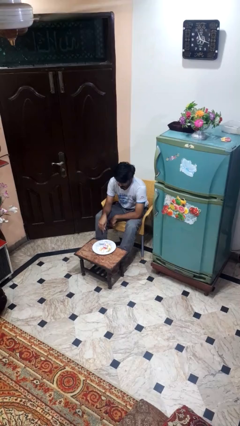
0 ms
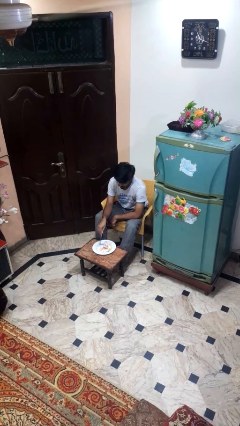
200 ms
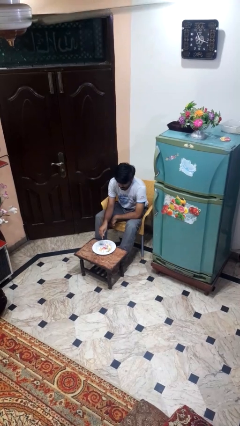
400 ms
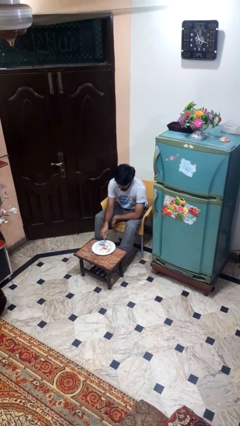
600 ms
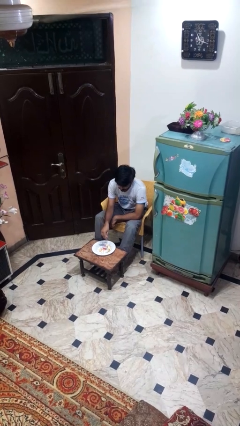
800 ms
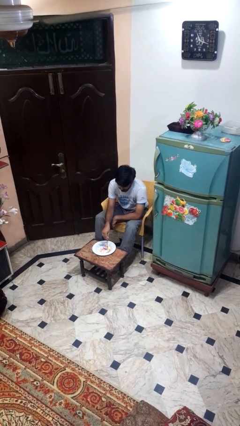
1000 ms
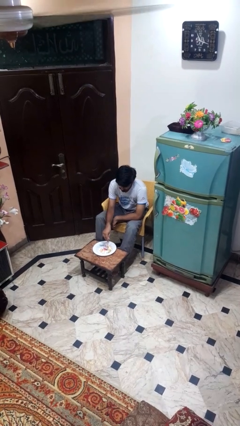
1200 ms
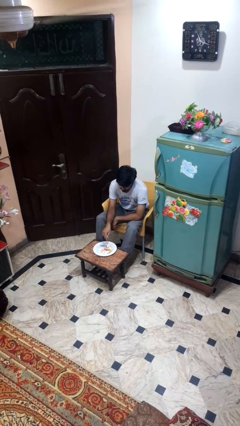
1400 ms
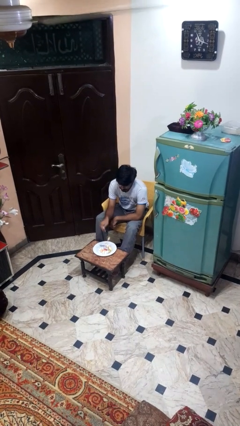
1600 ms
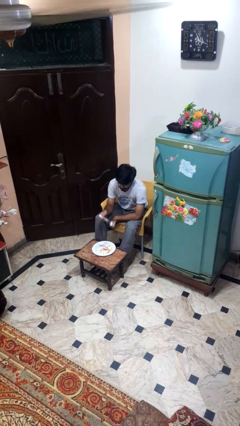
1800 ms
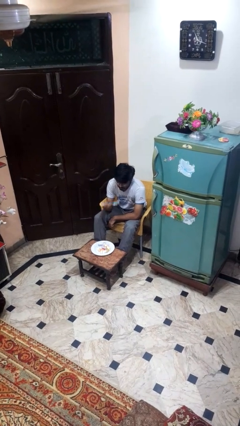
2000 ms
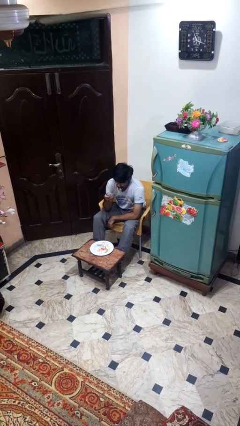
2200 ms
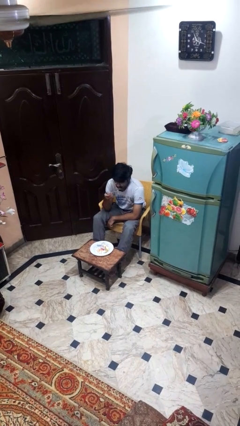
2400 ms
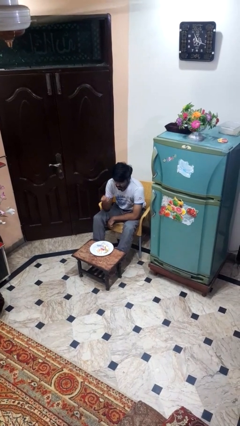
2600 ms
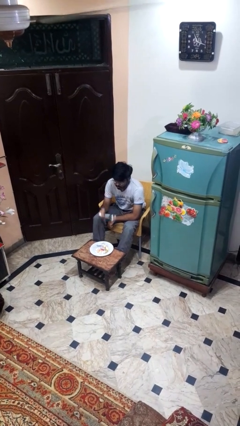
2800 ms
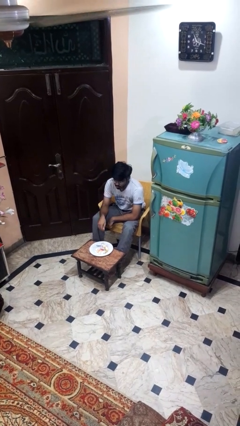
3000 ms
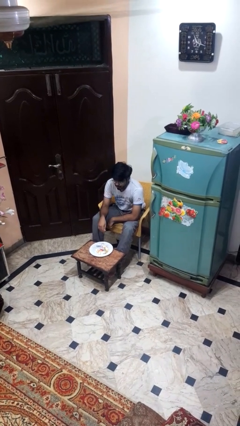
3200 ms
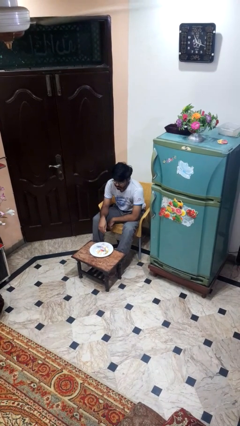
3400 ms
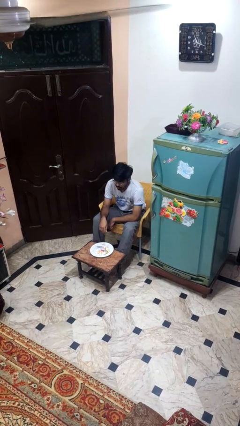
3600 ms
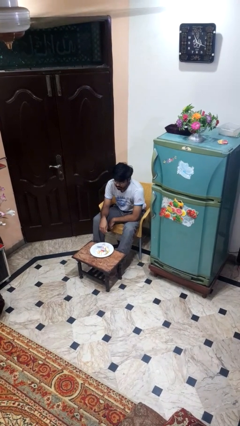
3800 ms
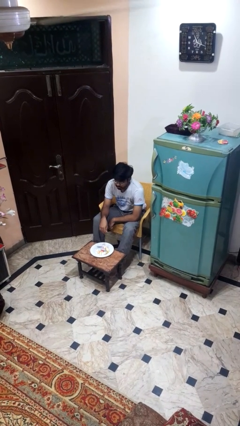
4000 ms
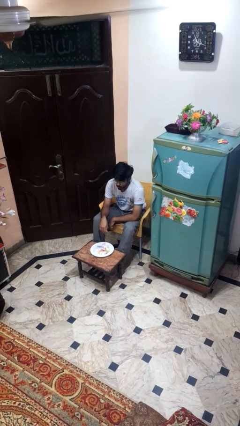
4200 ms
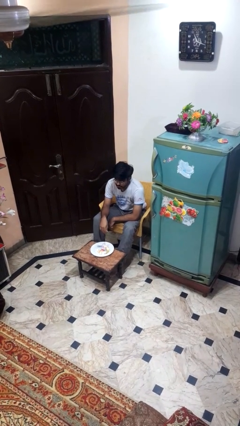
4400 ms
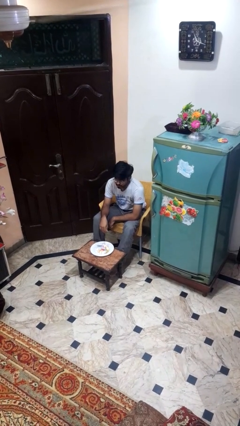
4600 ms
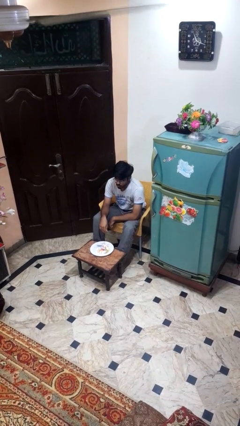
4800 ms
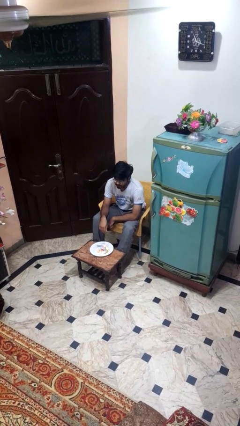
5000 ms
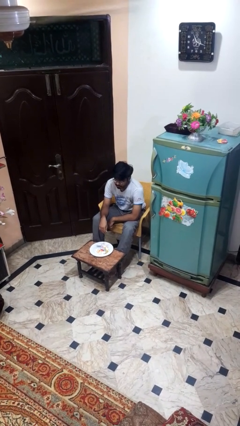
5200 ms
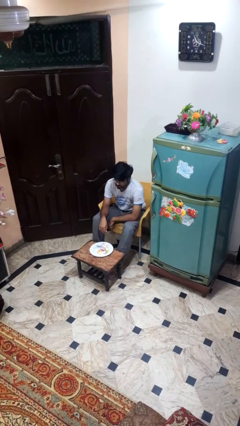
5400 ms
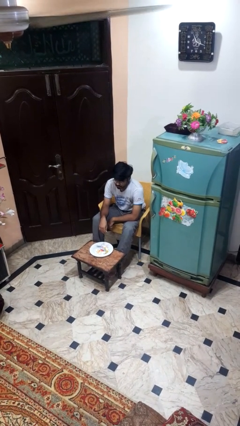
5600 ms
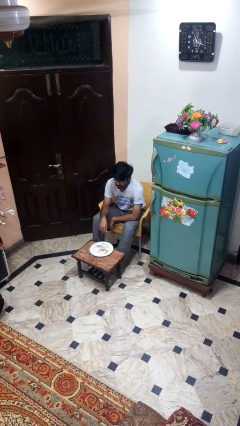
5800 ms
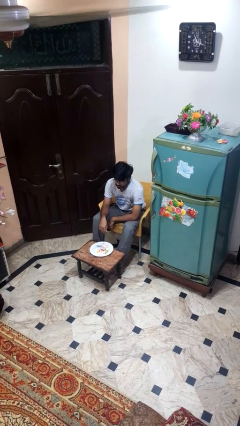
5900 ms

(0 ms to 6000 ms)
person eats with utensil

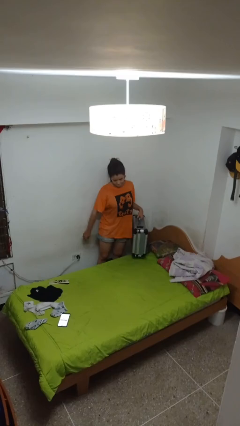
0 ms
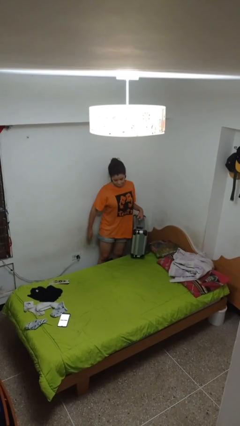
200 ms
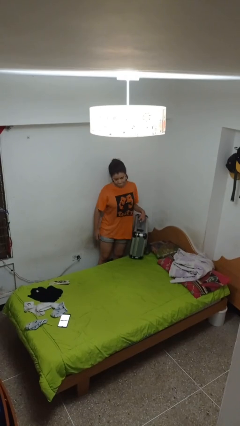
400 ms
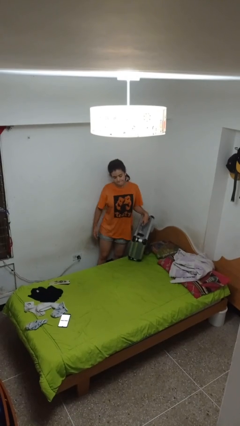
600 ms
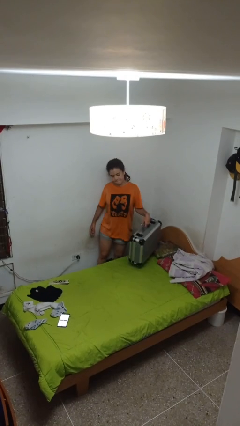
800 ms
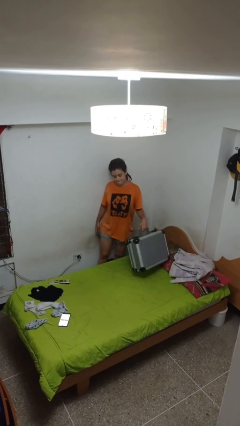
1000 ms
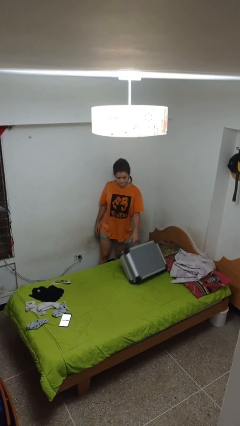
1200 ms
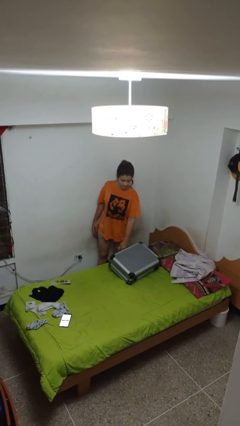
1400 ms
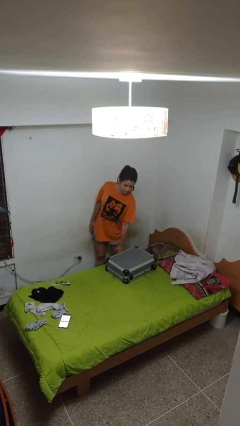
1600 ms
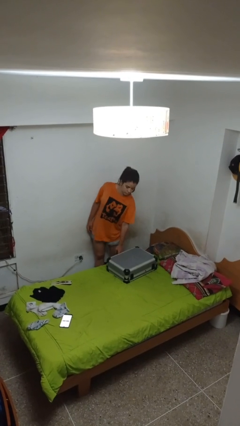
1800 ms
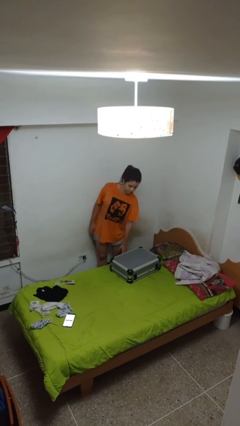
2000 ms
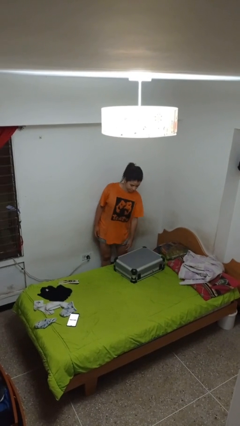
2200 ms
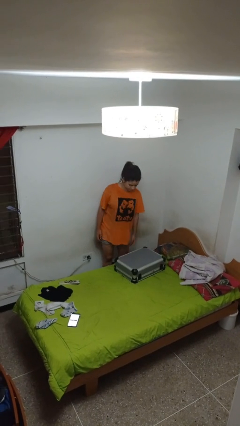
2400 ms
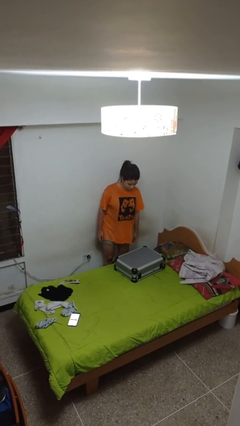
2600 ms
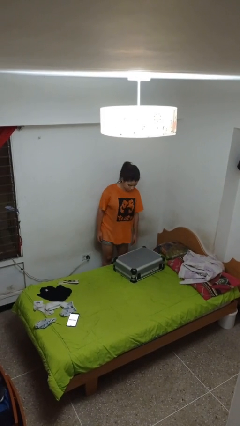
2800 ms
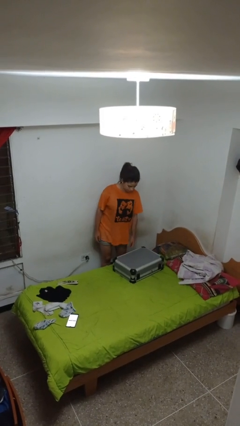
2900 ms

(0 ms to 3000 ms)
person puts down object on bed

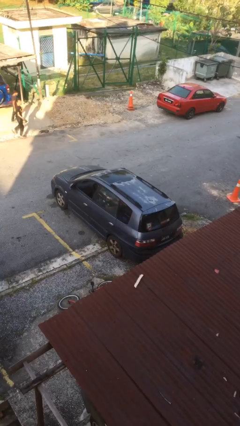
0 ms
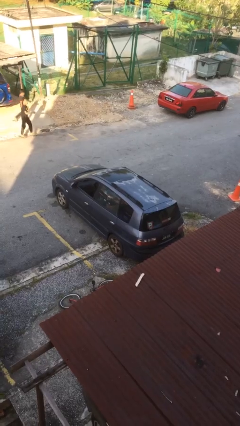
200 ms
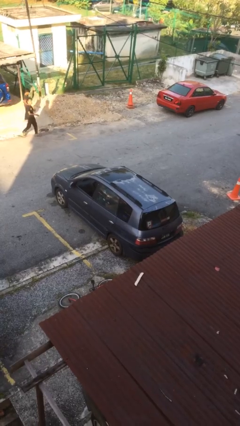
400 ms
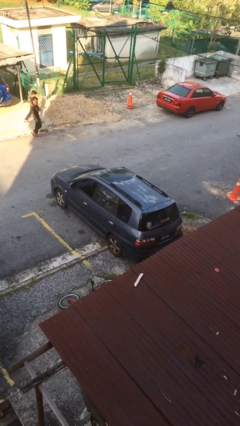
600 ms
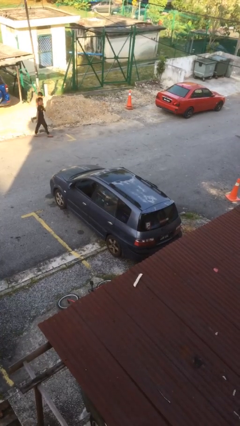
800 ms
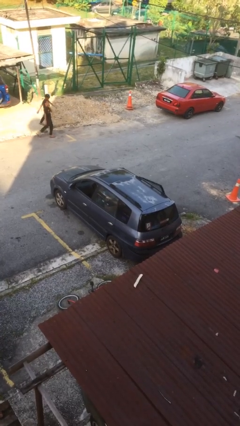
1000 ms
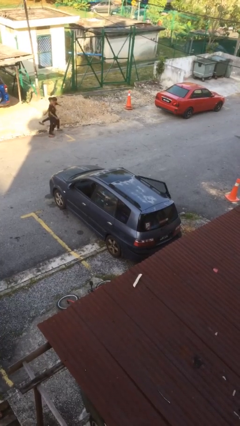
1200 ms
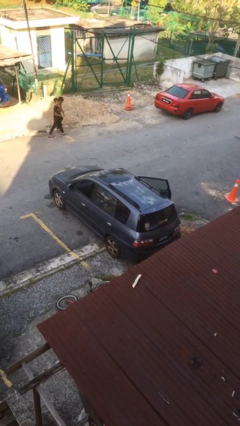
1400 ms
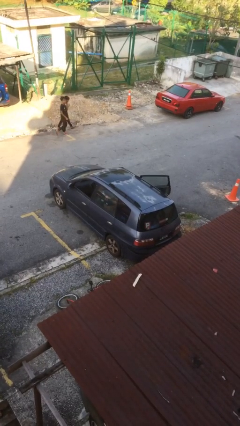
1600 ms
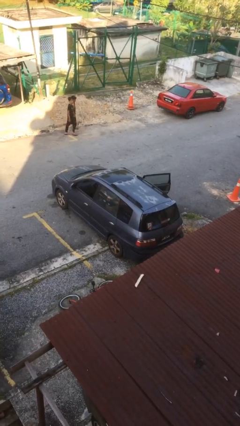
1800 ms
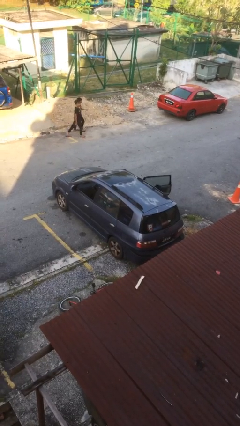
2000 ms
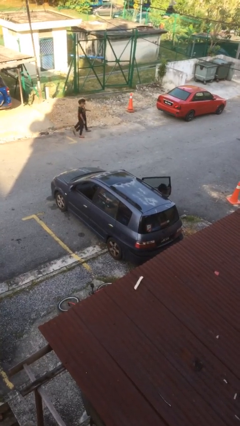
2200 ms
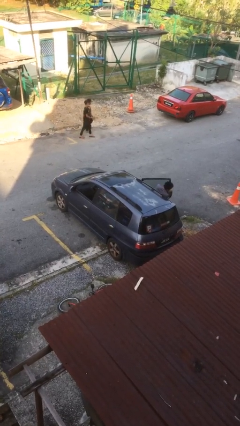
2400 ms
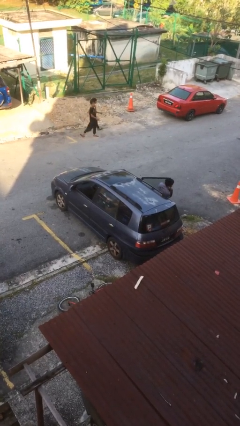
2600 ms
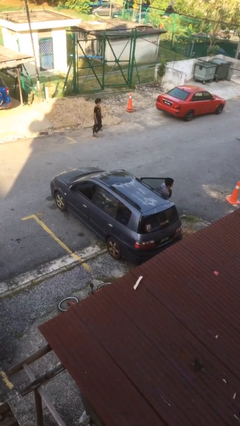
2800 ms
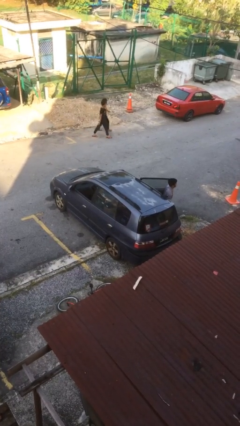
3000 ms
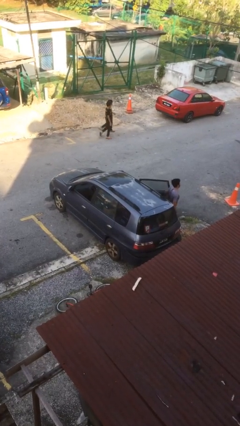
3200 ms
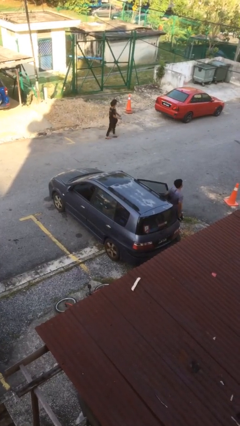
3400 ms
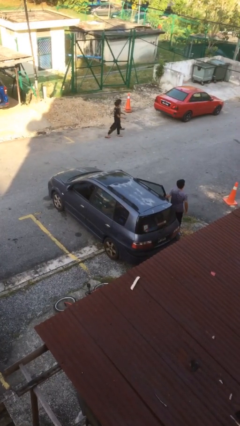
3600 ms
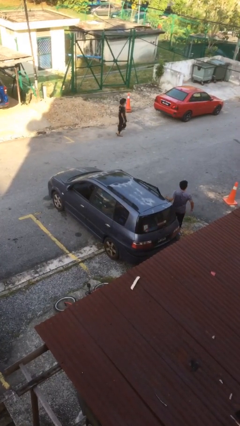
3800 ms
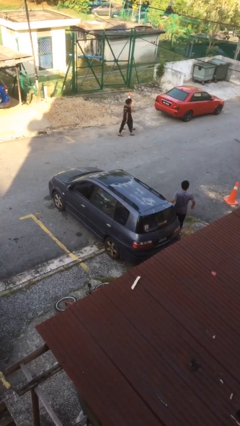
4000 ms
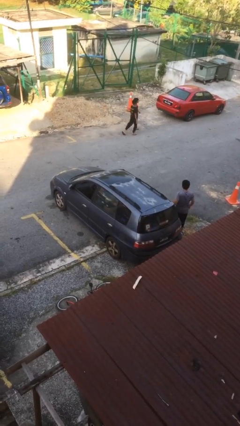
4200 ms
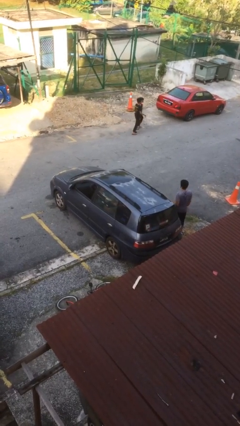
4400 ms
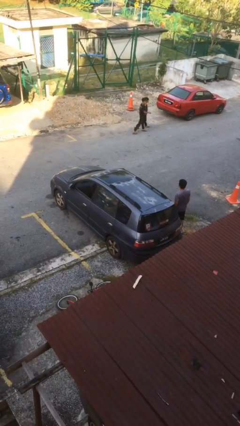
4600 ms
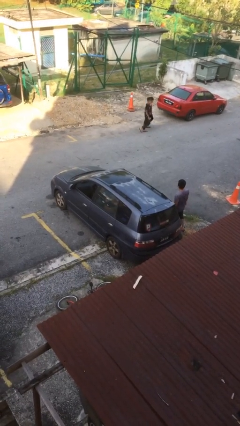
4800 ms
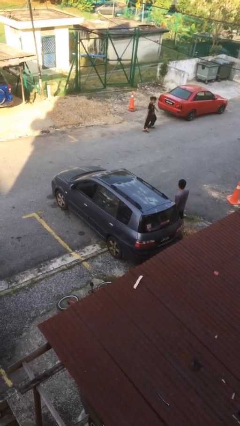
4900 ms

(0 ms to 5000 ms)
car drops off person

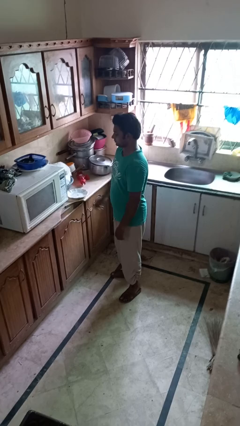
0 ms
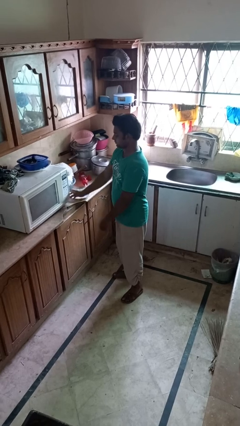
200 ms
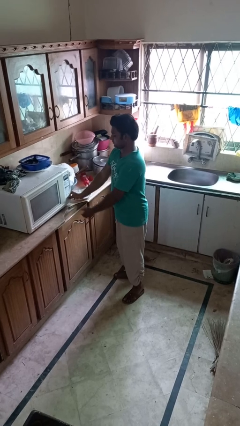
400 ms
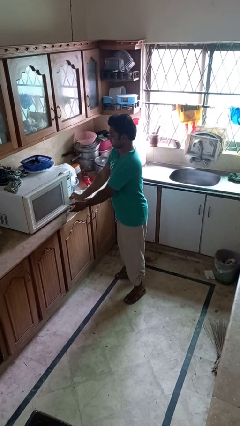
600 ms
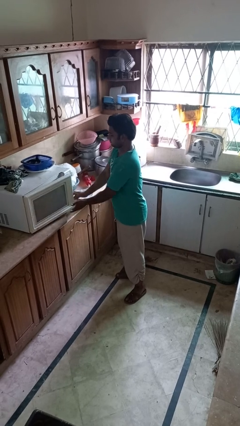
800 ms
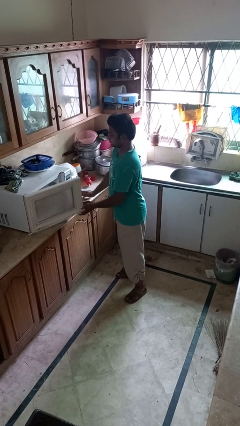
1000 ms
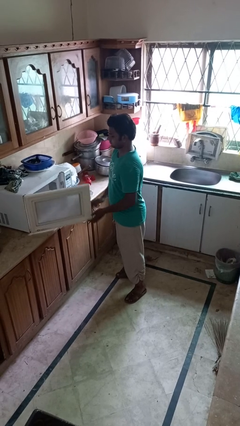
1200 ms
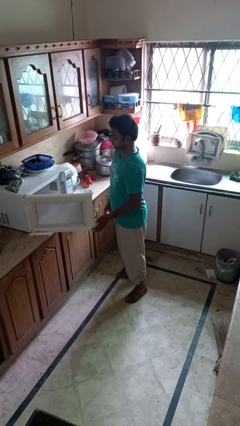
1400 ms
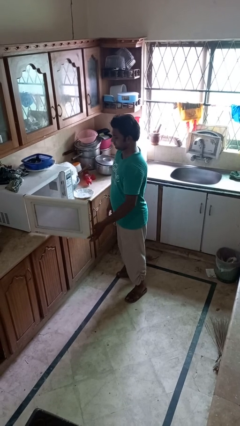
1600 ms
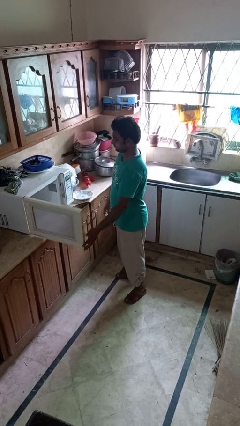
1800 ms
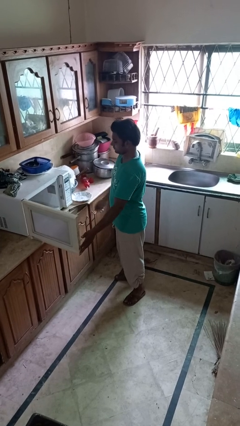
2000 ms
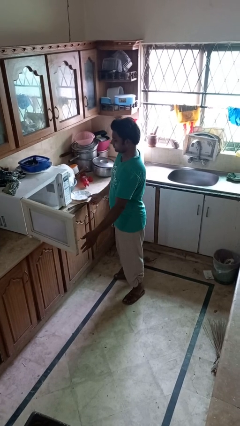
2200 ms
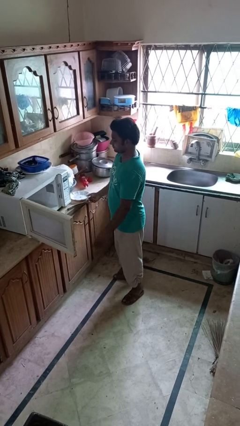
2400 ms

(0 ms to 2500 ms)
person opens microwave

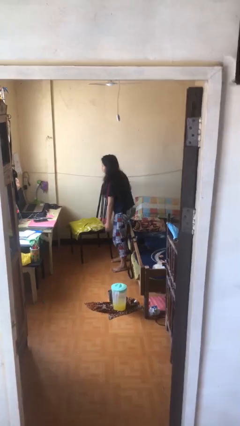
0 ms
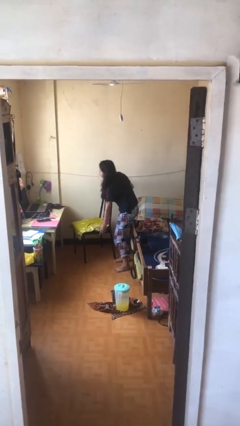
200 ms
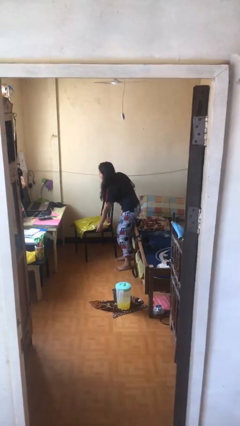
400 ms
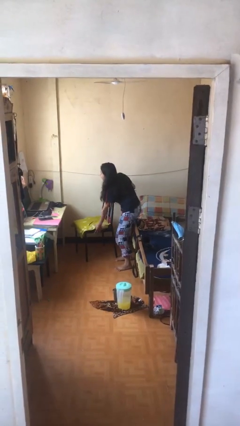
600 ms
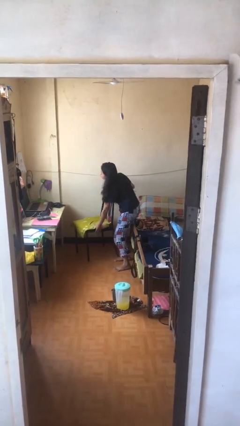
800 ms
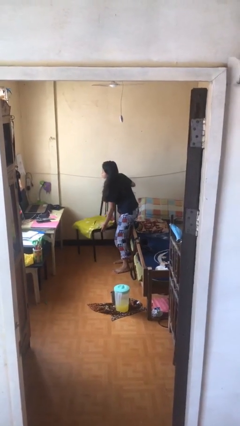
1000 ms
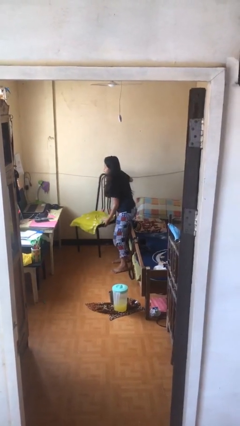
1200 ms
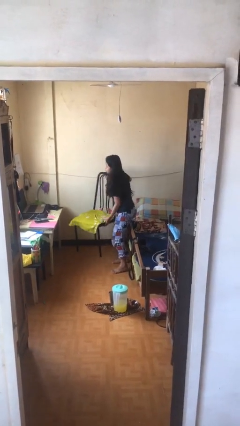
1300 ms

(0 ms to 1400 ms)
person picks up object from floor
